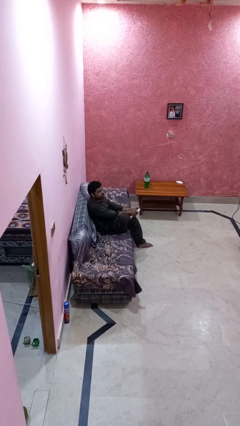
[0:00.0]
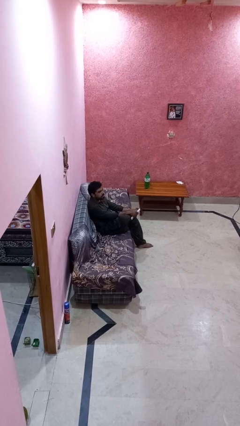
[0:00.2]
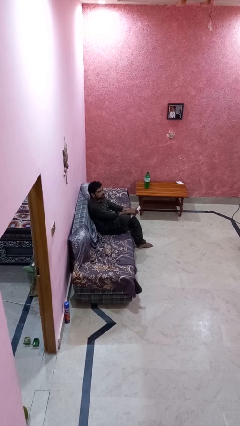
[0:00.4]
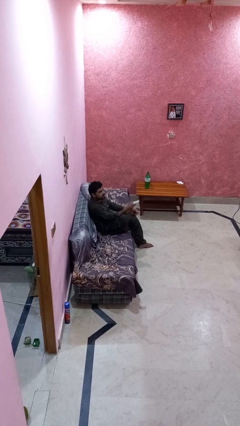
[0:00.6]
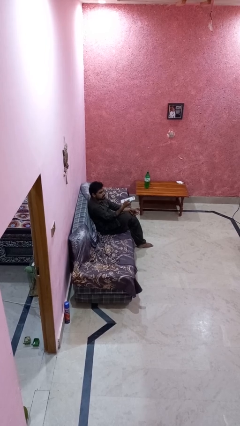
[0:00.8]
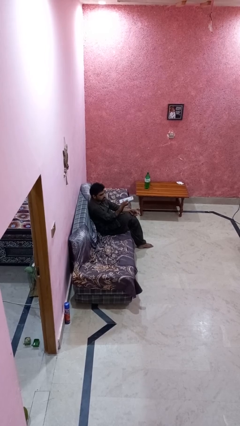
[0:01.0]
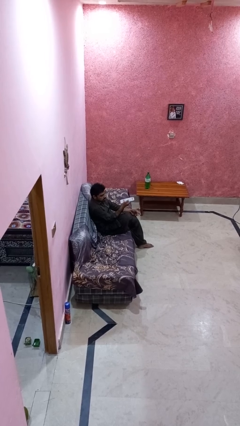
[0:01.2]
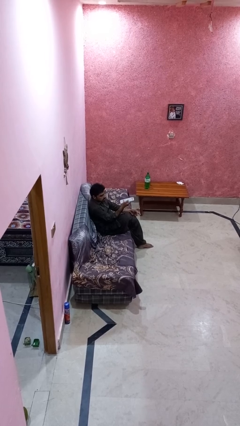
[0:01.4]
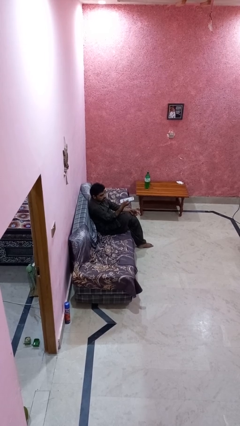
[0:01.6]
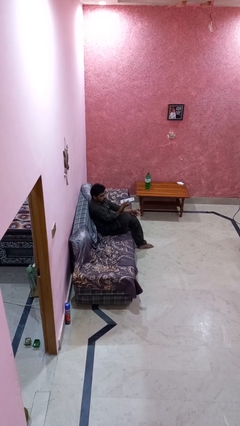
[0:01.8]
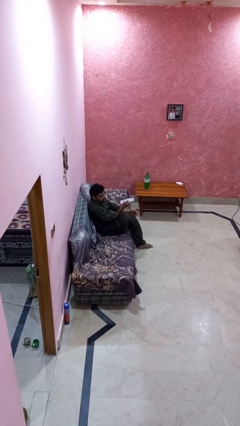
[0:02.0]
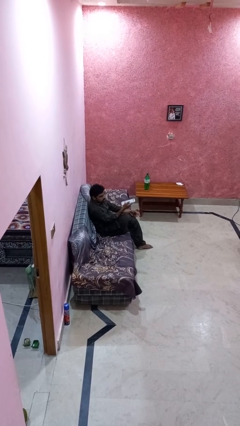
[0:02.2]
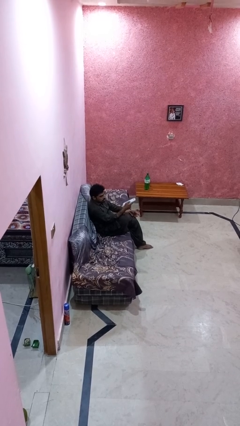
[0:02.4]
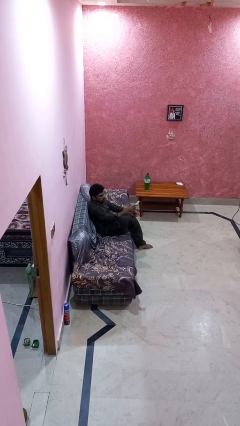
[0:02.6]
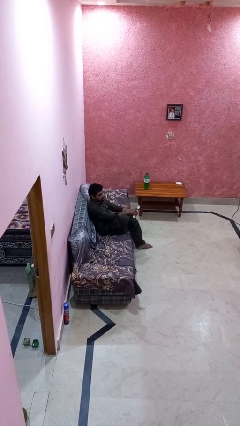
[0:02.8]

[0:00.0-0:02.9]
person uses television remote

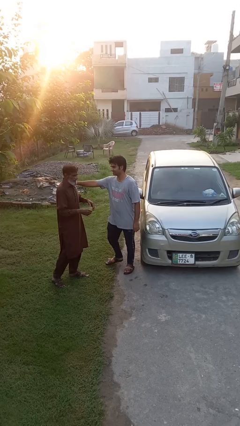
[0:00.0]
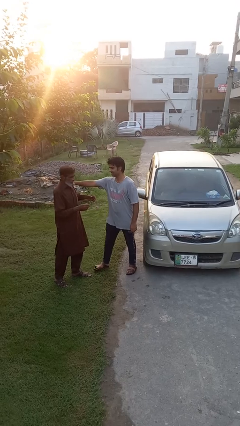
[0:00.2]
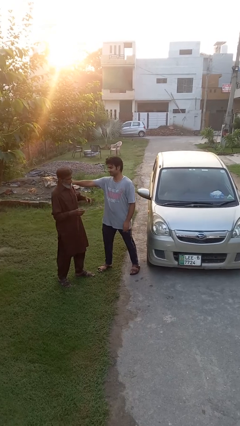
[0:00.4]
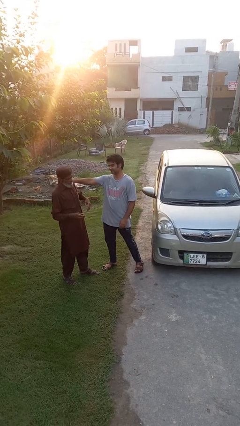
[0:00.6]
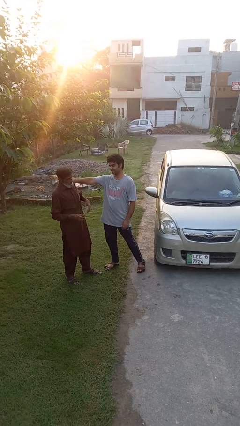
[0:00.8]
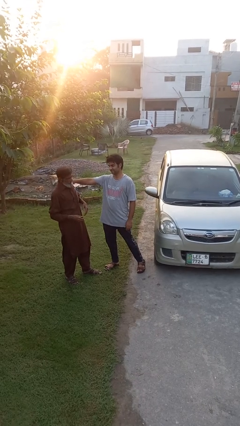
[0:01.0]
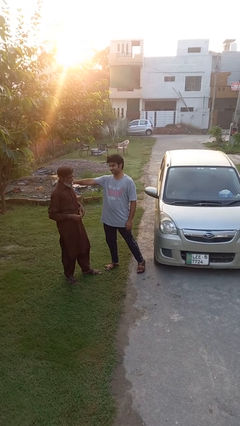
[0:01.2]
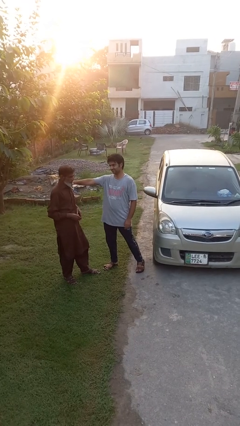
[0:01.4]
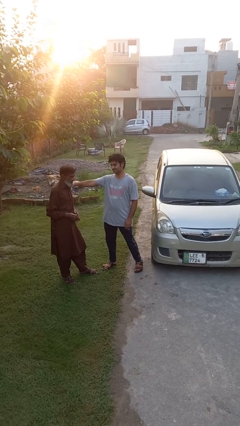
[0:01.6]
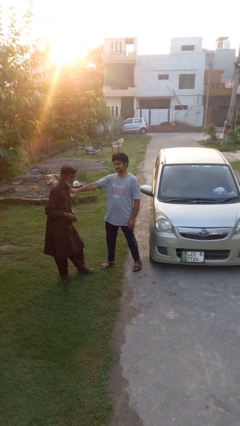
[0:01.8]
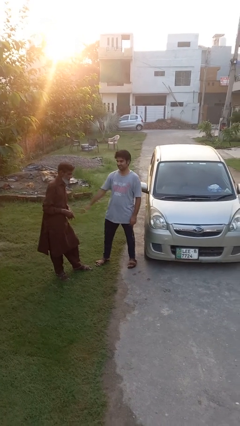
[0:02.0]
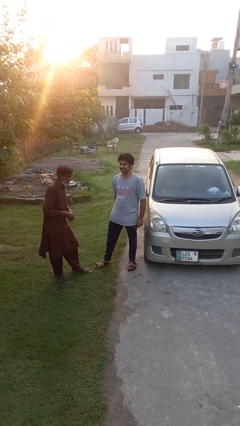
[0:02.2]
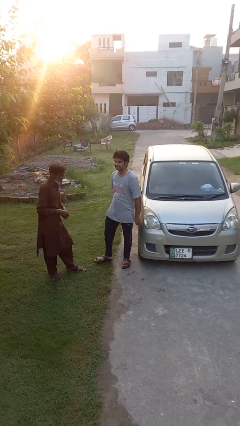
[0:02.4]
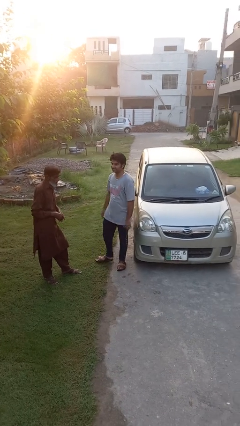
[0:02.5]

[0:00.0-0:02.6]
person shoves person

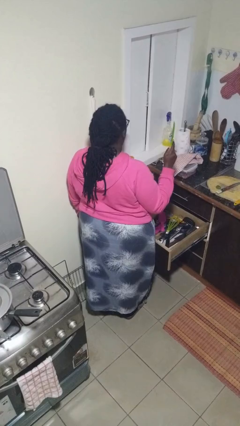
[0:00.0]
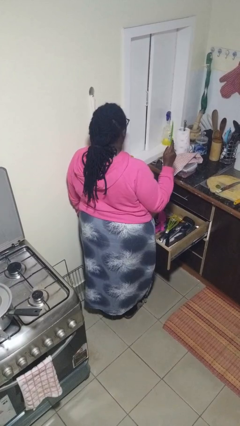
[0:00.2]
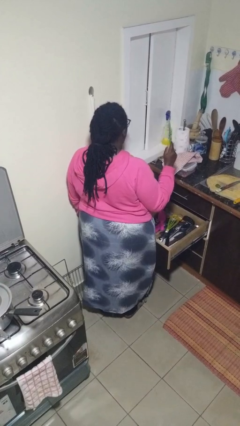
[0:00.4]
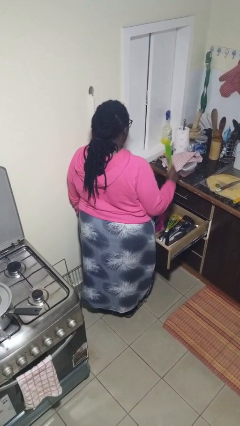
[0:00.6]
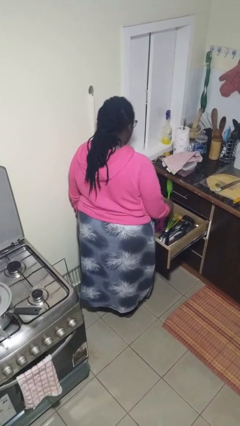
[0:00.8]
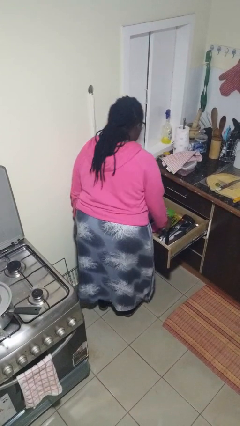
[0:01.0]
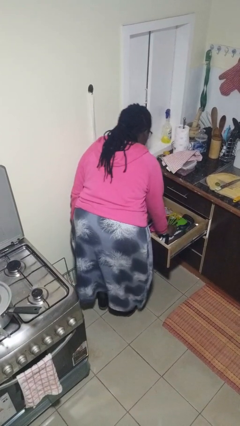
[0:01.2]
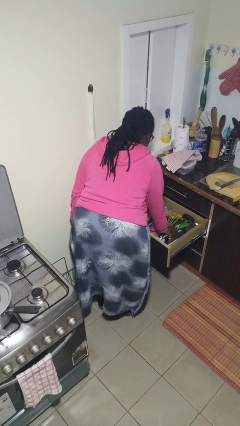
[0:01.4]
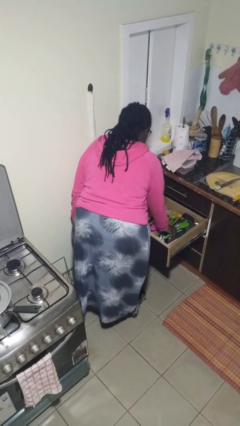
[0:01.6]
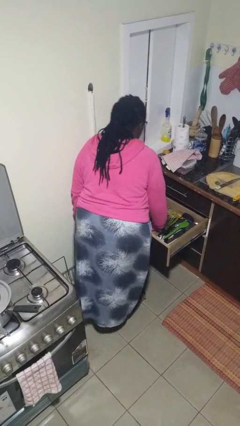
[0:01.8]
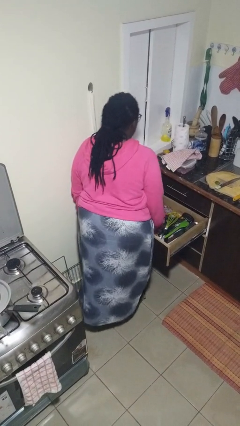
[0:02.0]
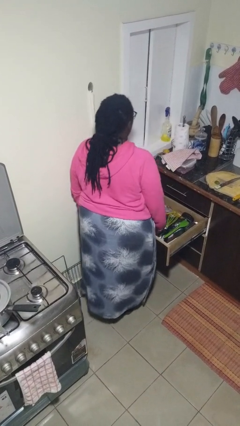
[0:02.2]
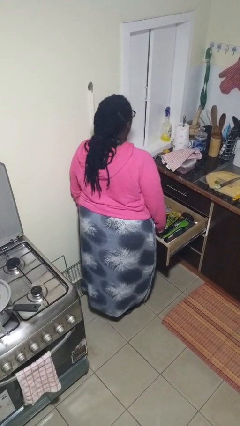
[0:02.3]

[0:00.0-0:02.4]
person puts object into kitchen drawer

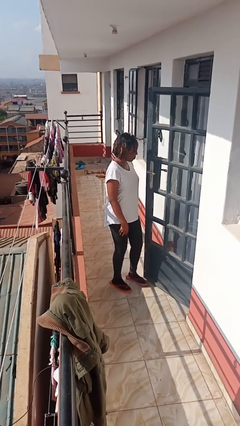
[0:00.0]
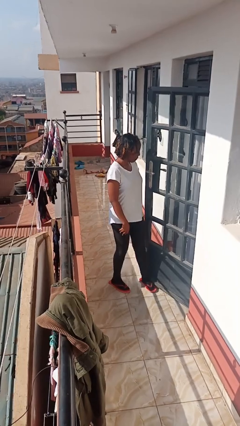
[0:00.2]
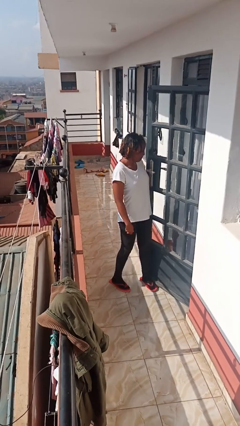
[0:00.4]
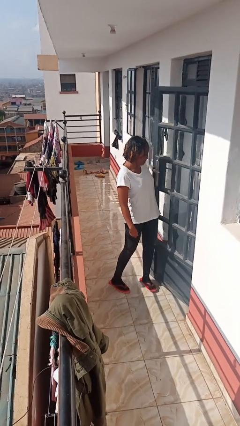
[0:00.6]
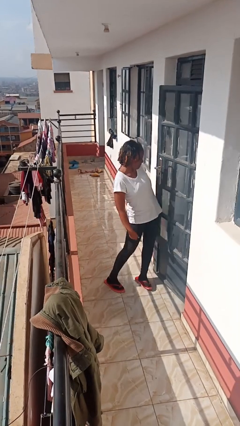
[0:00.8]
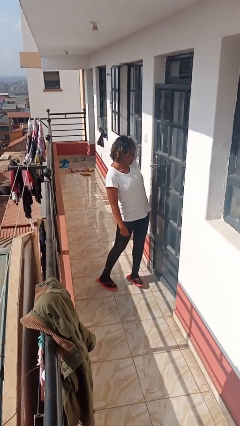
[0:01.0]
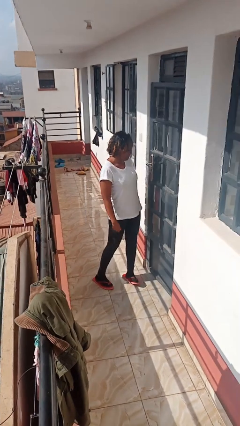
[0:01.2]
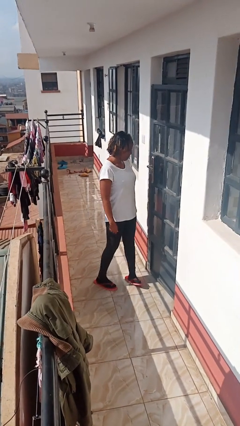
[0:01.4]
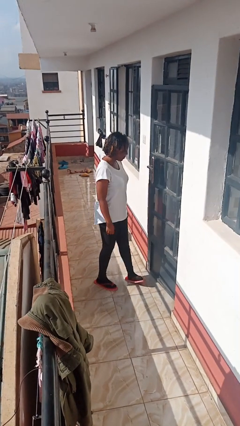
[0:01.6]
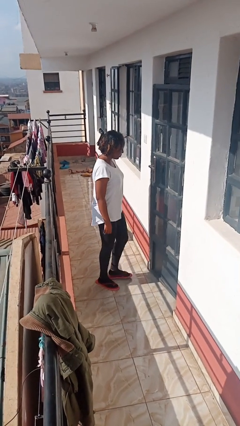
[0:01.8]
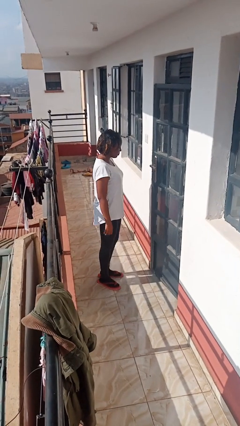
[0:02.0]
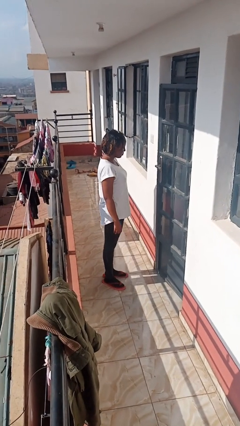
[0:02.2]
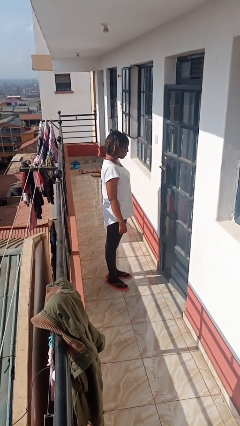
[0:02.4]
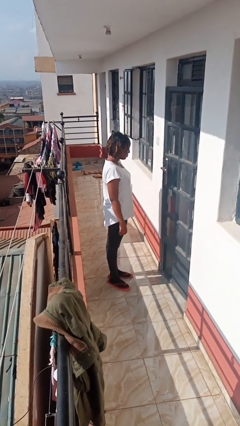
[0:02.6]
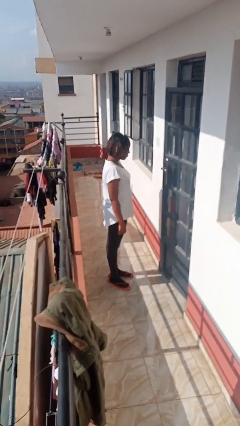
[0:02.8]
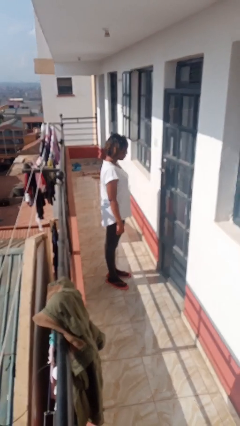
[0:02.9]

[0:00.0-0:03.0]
person closes door with hip

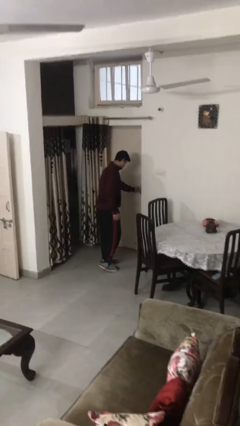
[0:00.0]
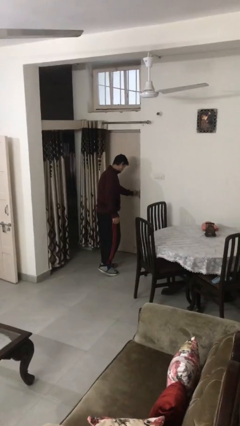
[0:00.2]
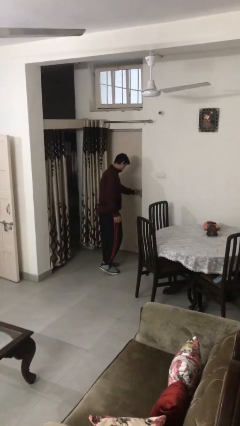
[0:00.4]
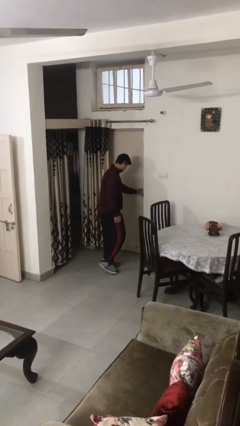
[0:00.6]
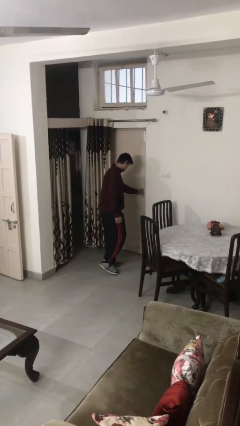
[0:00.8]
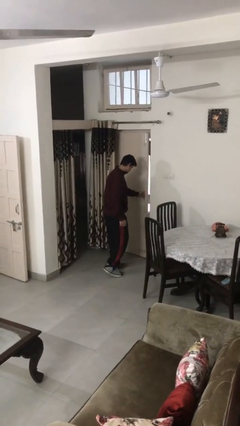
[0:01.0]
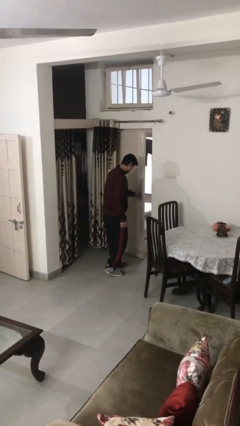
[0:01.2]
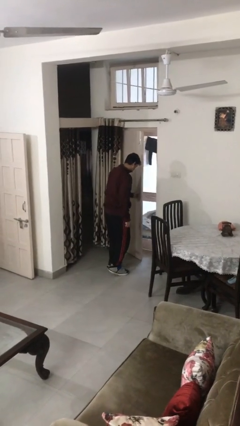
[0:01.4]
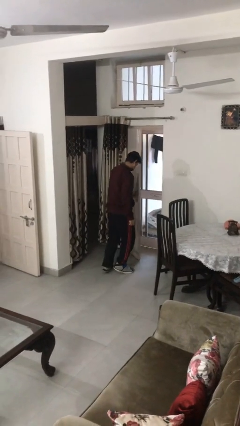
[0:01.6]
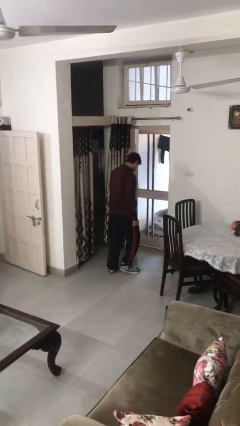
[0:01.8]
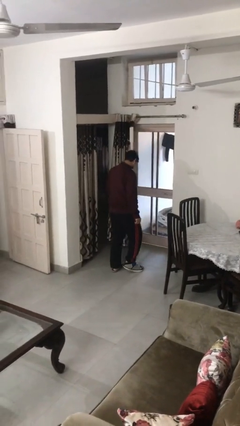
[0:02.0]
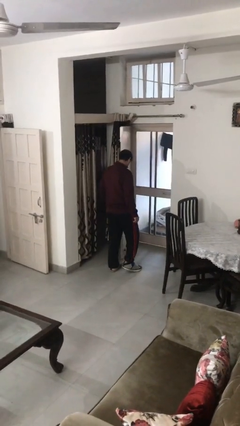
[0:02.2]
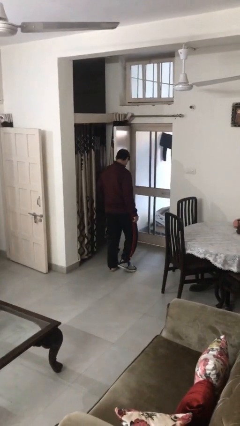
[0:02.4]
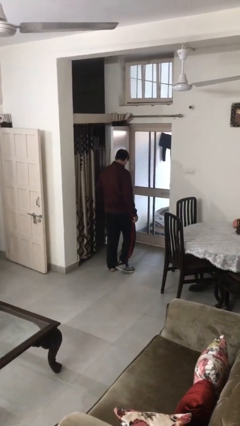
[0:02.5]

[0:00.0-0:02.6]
person opens facility door

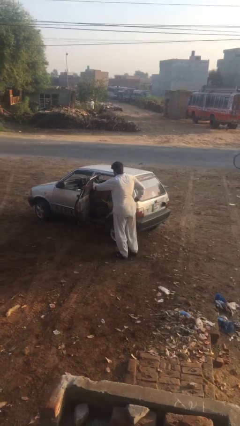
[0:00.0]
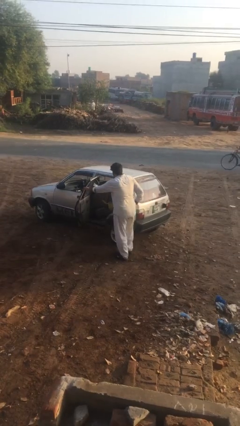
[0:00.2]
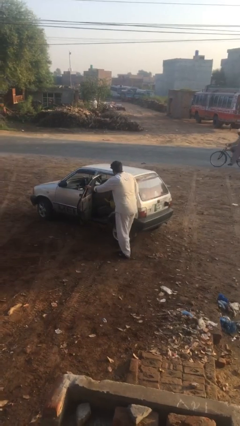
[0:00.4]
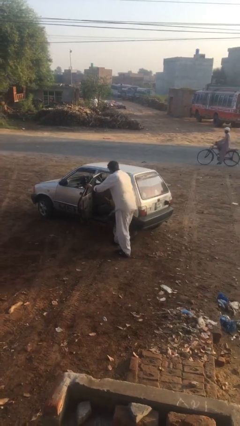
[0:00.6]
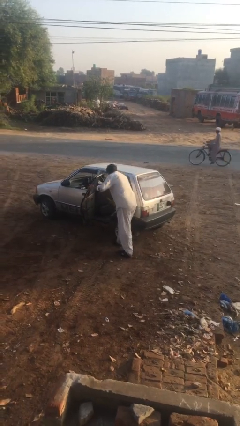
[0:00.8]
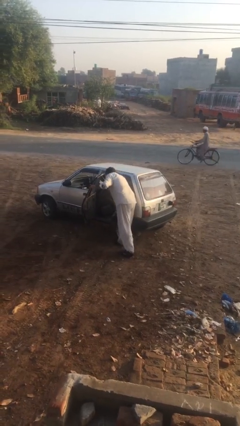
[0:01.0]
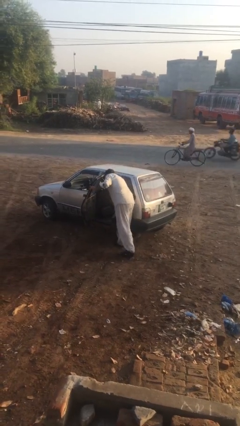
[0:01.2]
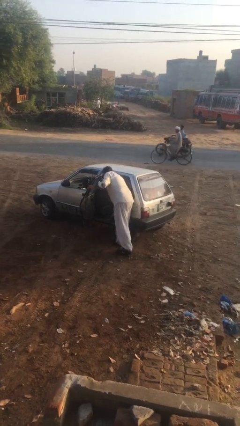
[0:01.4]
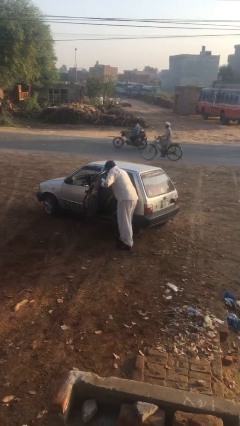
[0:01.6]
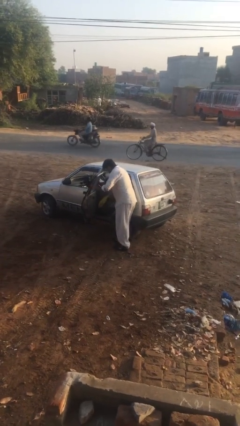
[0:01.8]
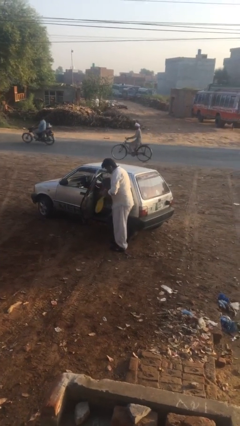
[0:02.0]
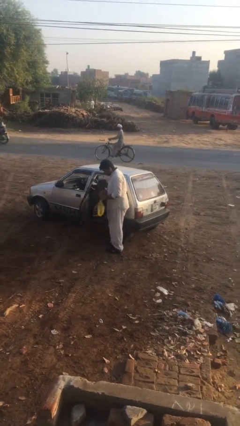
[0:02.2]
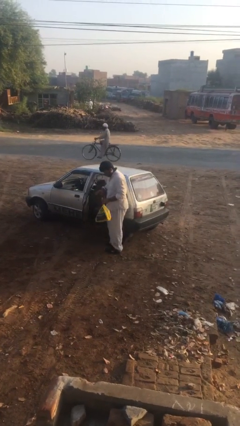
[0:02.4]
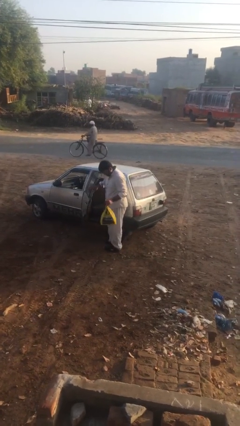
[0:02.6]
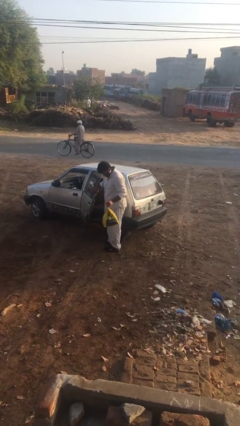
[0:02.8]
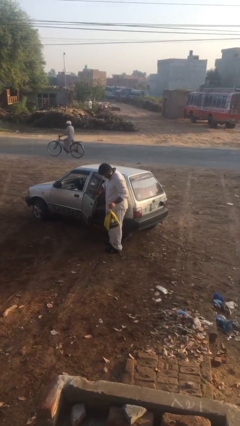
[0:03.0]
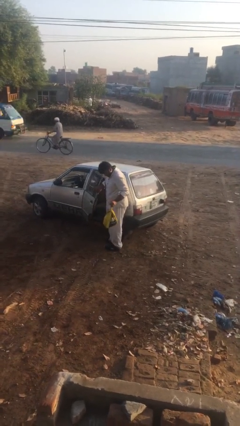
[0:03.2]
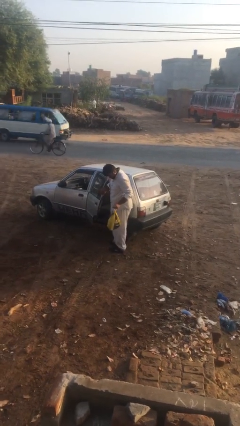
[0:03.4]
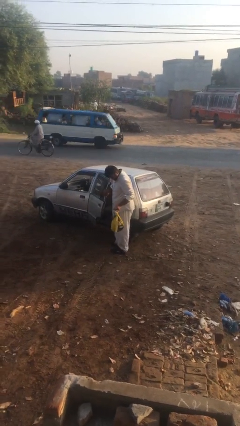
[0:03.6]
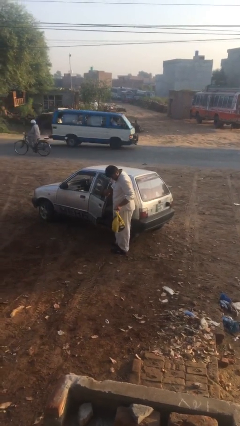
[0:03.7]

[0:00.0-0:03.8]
person unloads car

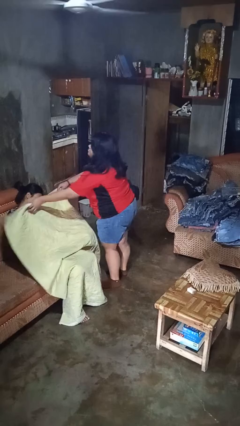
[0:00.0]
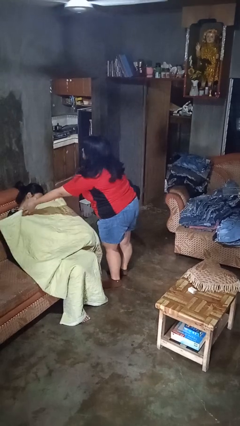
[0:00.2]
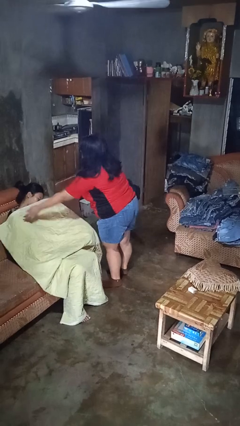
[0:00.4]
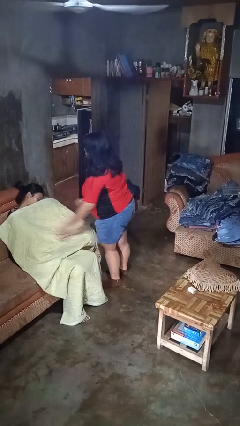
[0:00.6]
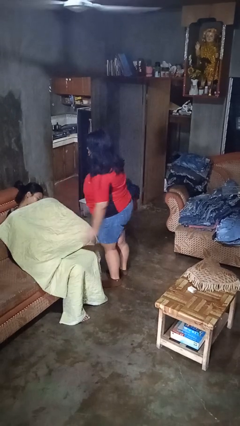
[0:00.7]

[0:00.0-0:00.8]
person covers friend with blanket
